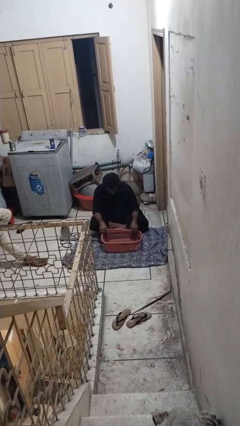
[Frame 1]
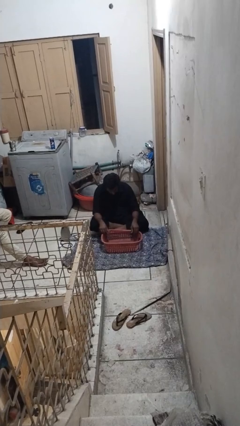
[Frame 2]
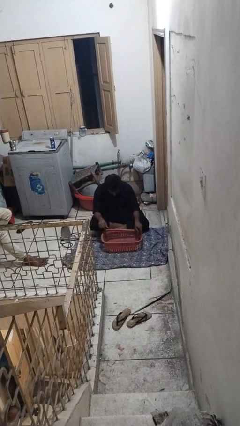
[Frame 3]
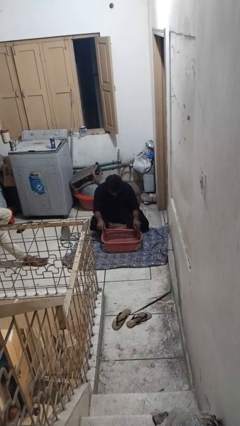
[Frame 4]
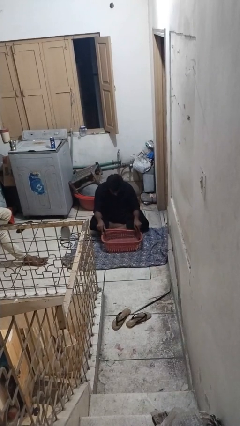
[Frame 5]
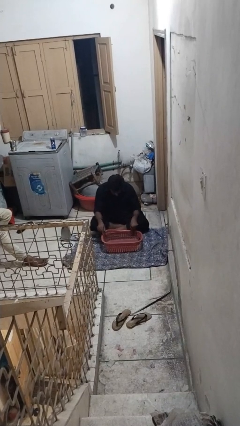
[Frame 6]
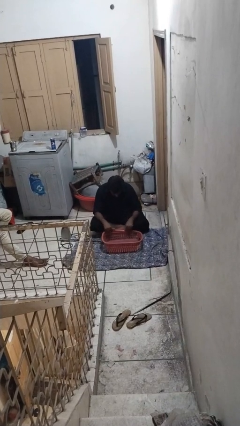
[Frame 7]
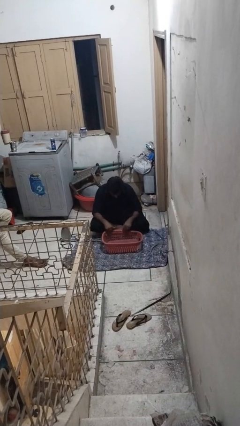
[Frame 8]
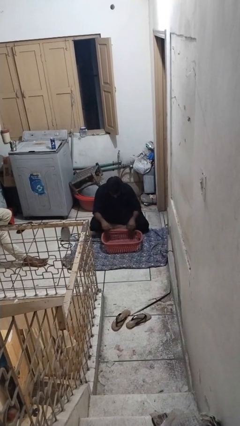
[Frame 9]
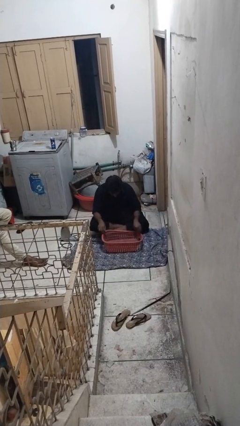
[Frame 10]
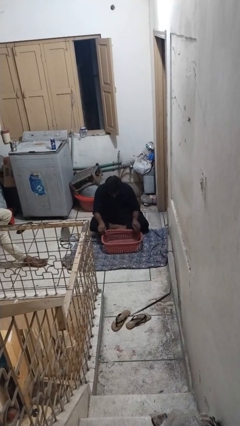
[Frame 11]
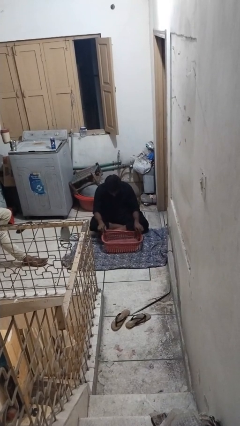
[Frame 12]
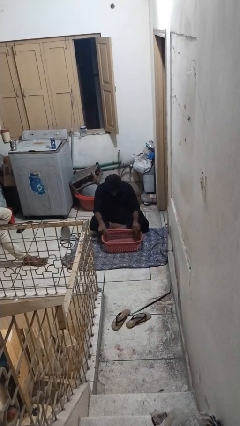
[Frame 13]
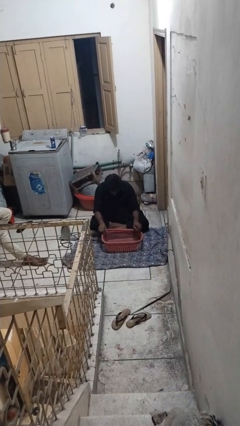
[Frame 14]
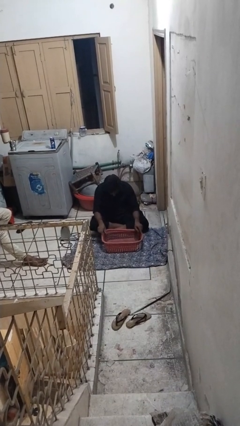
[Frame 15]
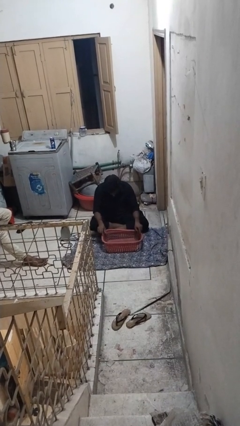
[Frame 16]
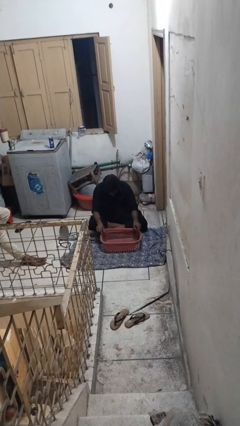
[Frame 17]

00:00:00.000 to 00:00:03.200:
person taps object with finger

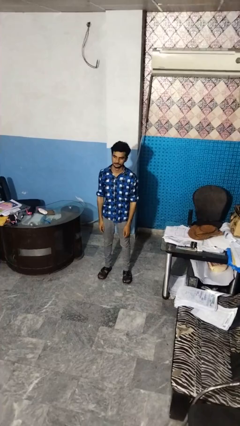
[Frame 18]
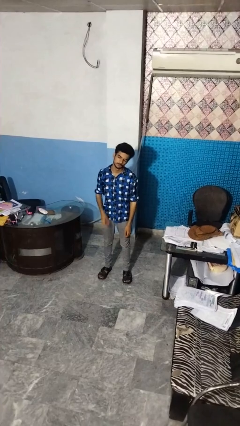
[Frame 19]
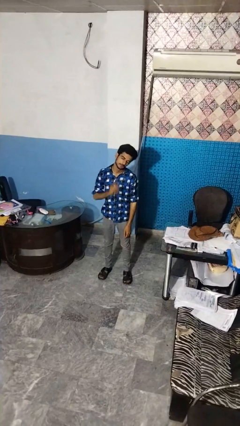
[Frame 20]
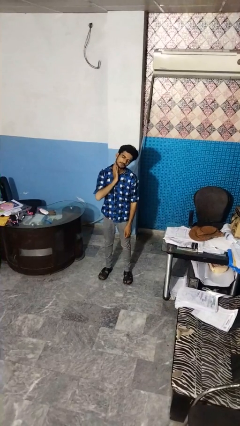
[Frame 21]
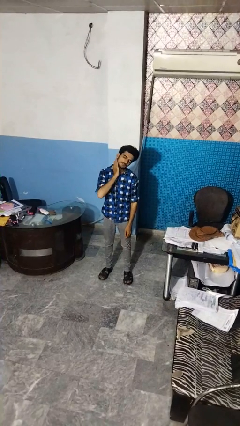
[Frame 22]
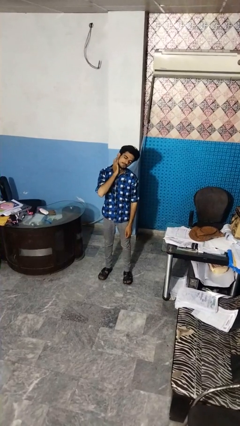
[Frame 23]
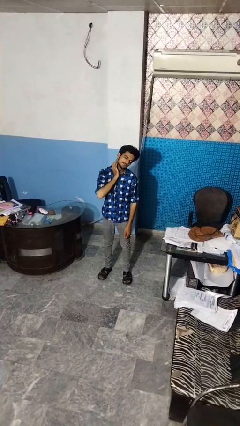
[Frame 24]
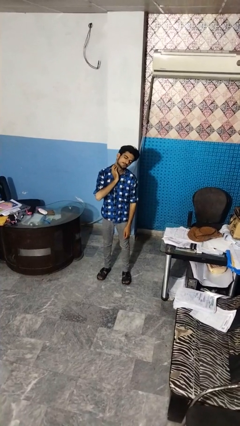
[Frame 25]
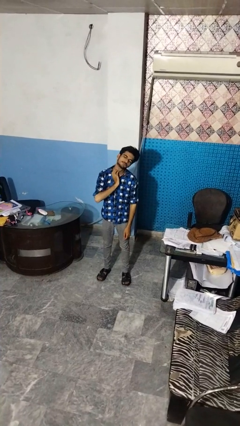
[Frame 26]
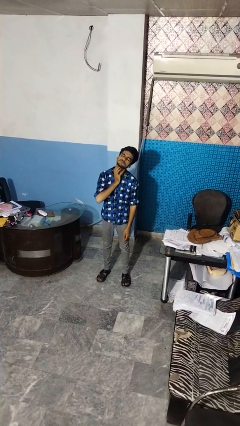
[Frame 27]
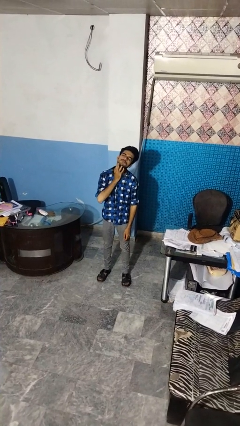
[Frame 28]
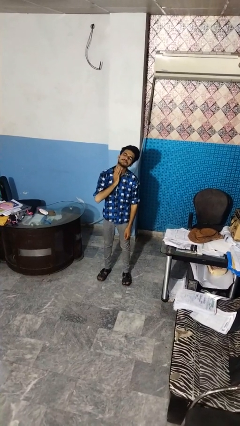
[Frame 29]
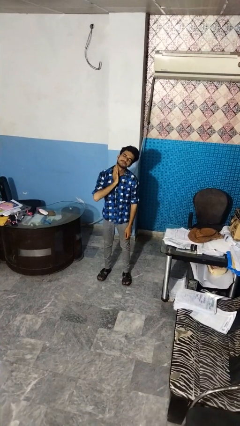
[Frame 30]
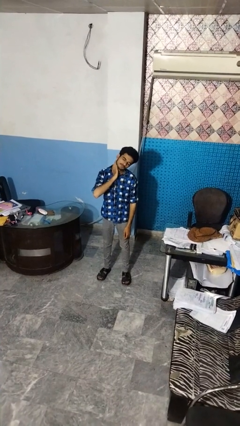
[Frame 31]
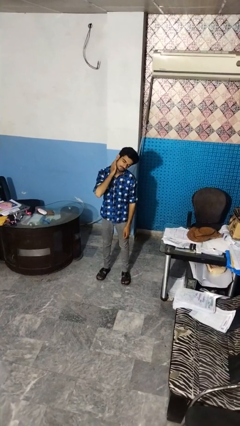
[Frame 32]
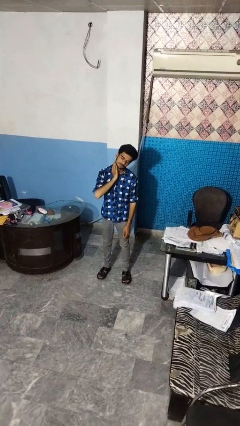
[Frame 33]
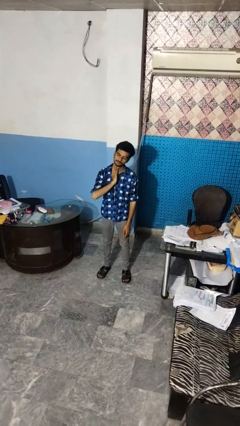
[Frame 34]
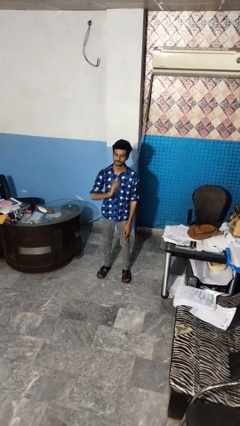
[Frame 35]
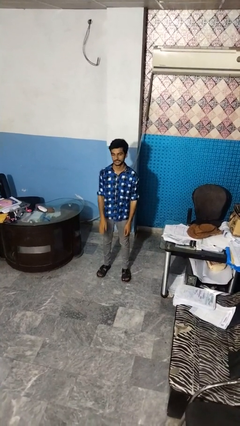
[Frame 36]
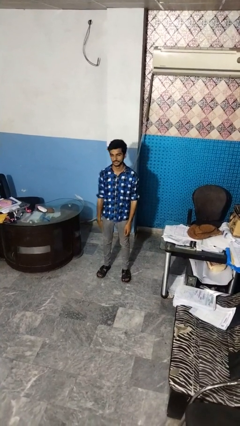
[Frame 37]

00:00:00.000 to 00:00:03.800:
person rubs neck

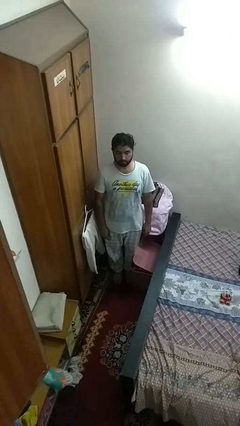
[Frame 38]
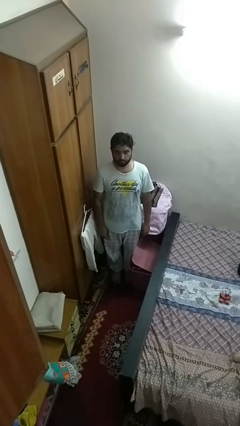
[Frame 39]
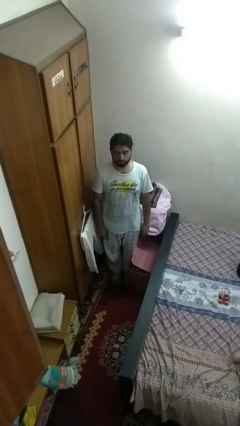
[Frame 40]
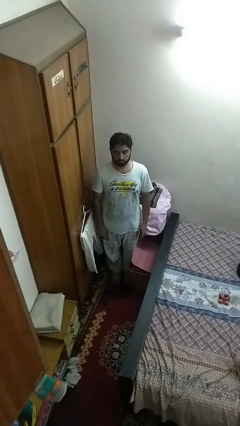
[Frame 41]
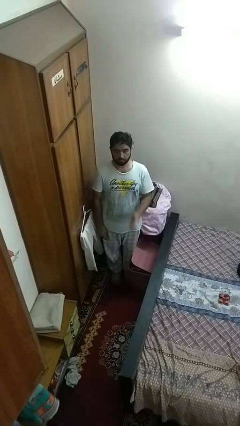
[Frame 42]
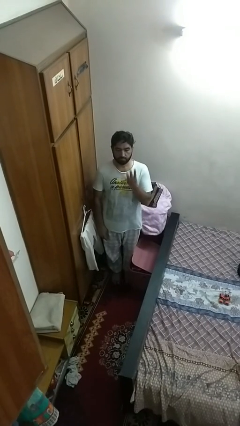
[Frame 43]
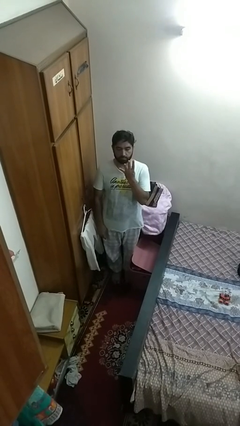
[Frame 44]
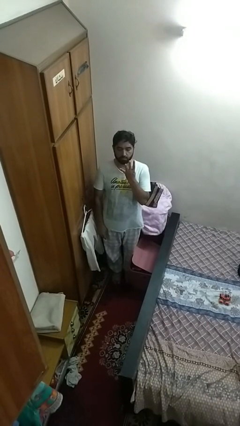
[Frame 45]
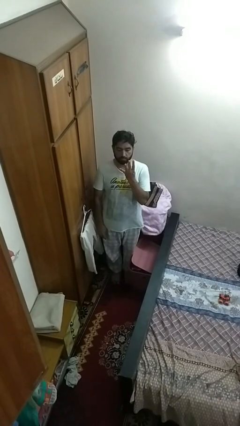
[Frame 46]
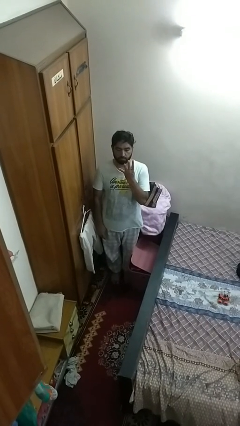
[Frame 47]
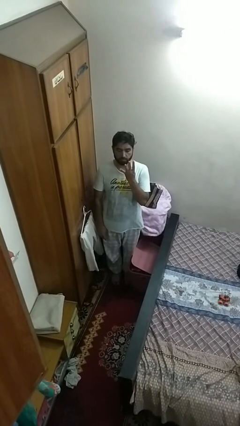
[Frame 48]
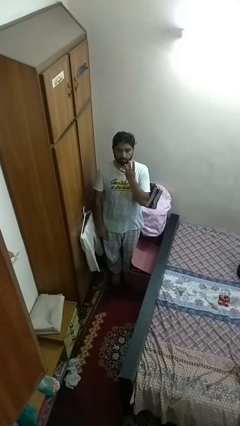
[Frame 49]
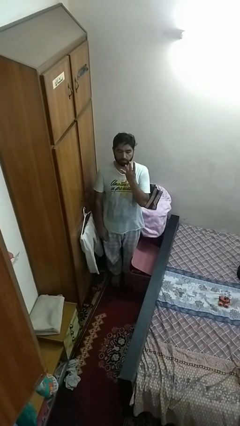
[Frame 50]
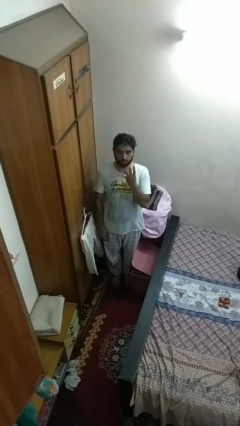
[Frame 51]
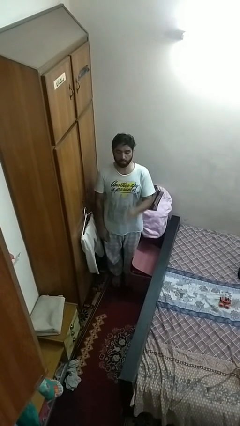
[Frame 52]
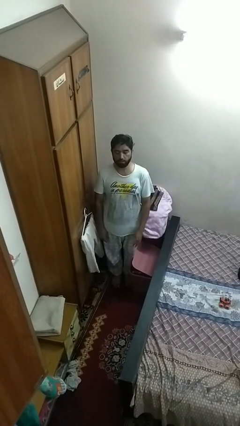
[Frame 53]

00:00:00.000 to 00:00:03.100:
person gestures number four

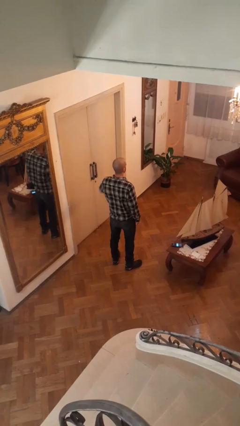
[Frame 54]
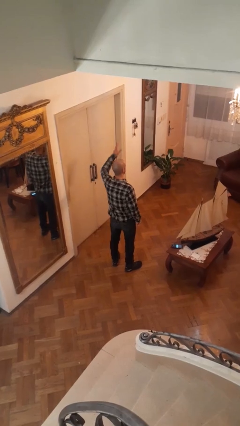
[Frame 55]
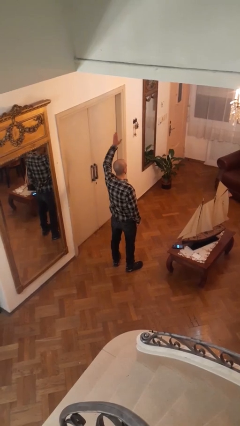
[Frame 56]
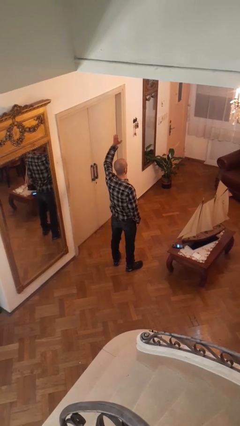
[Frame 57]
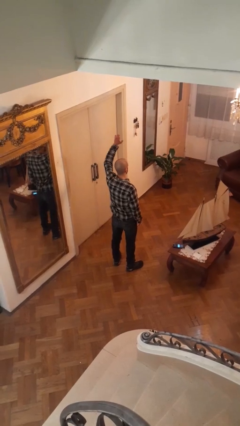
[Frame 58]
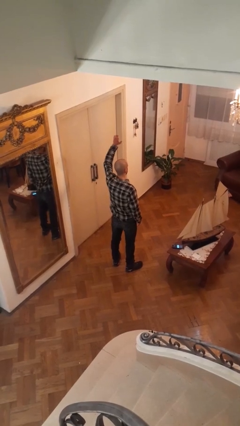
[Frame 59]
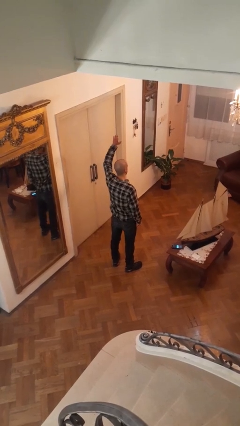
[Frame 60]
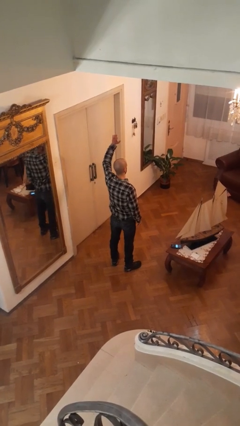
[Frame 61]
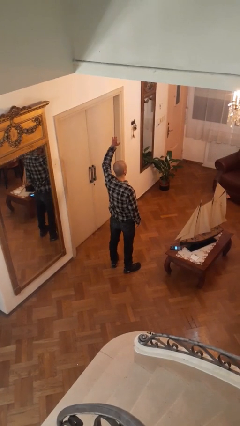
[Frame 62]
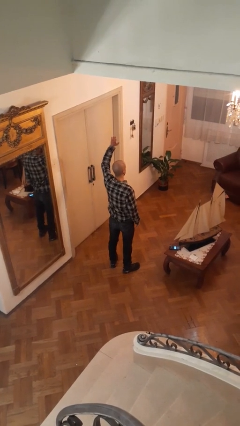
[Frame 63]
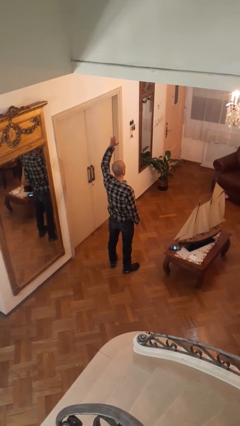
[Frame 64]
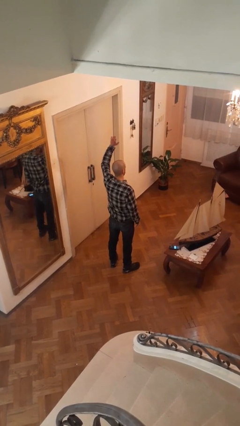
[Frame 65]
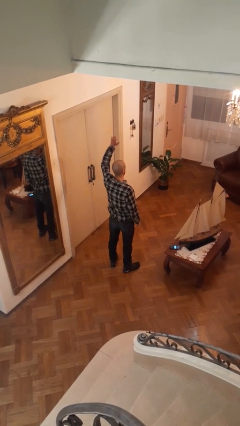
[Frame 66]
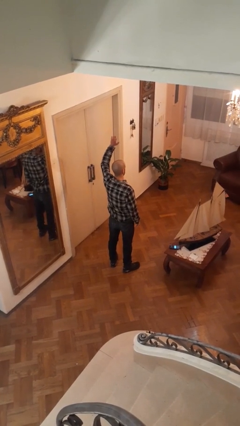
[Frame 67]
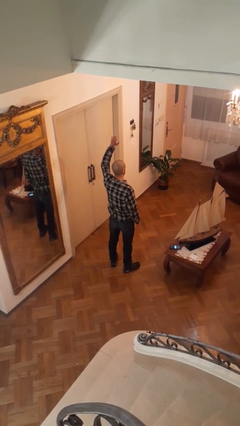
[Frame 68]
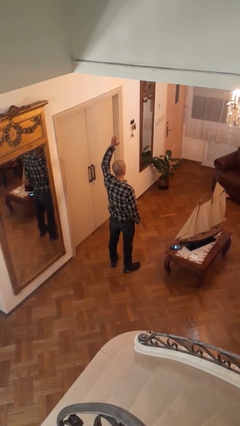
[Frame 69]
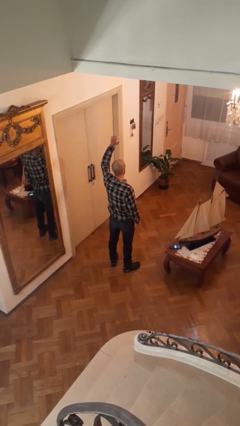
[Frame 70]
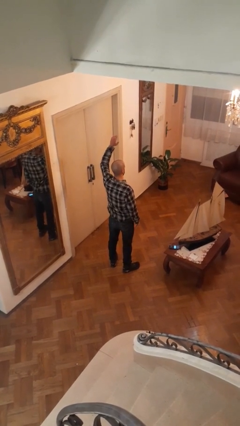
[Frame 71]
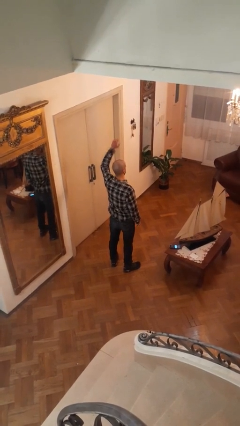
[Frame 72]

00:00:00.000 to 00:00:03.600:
person gestures raise hand

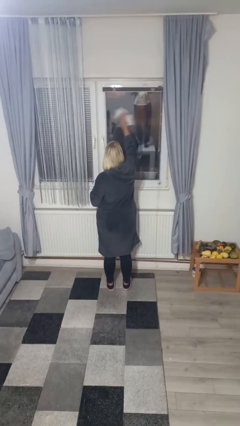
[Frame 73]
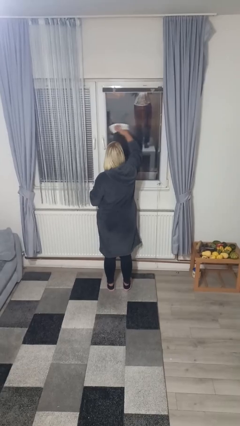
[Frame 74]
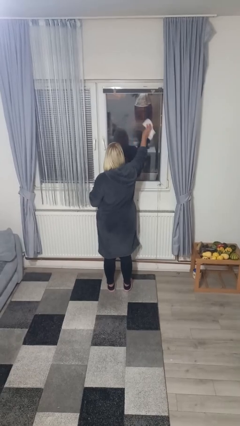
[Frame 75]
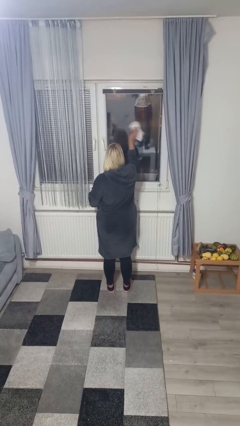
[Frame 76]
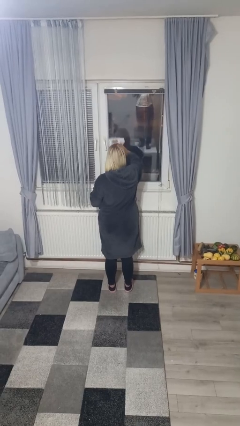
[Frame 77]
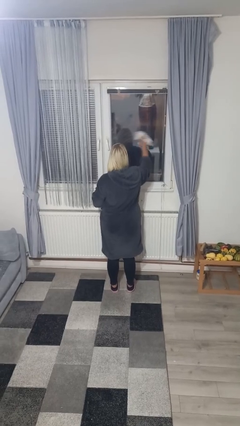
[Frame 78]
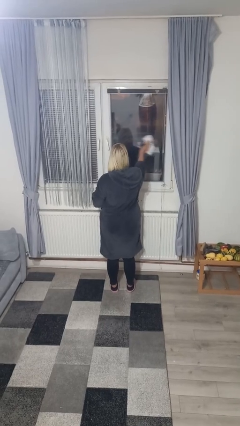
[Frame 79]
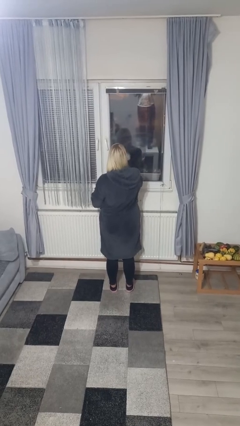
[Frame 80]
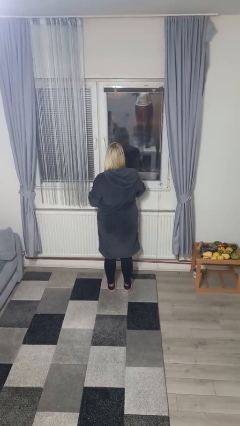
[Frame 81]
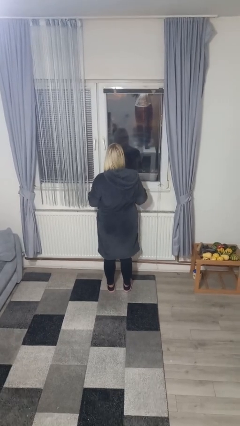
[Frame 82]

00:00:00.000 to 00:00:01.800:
person washes window

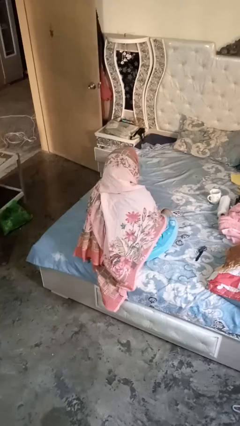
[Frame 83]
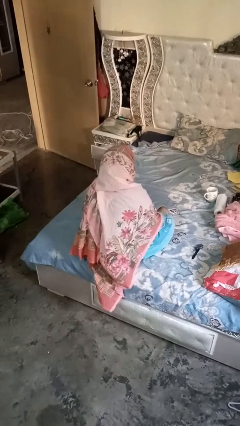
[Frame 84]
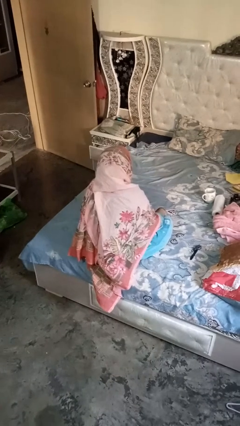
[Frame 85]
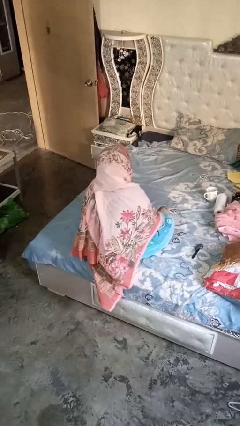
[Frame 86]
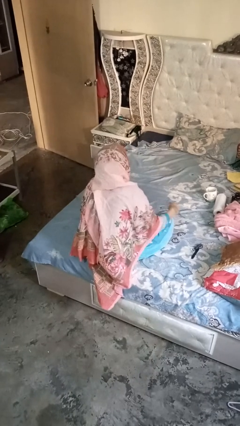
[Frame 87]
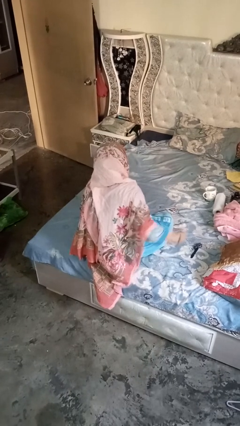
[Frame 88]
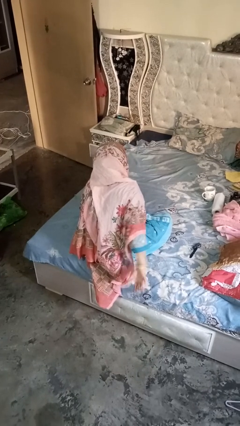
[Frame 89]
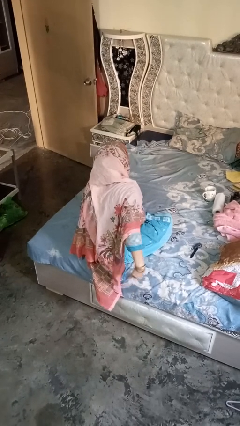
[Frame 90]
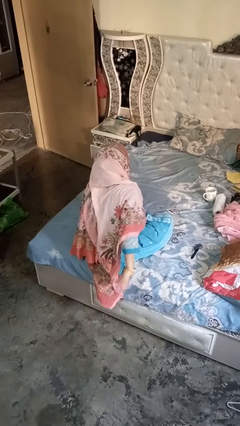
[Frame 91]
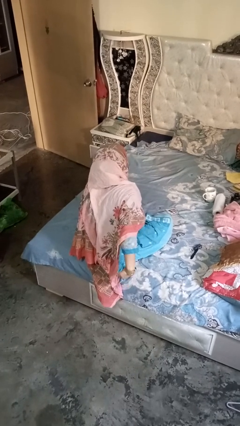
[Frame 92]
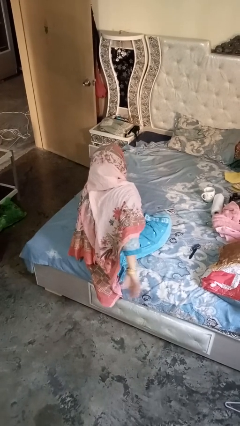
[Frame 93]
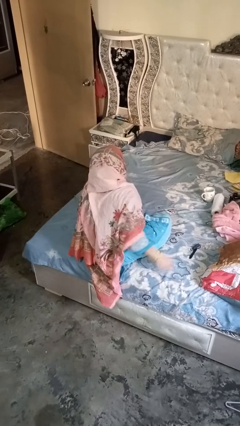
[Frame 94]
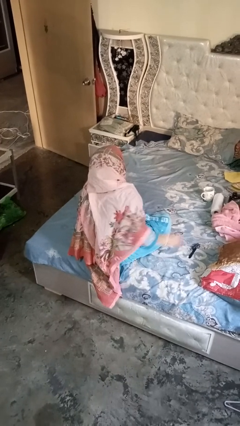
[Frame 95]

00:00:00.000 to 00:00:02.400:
person gestures behind me
